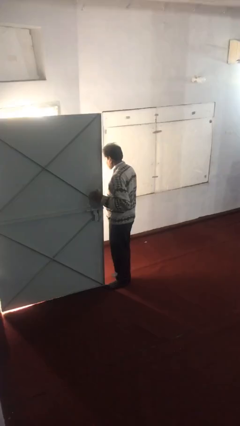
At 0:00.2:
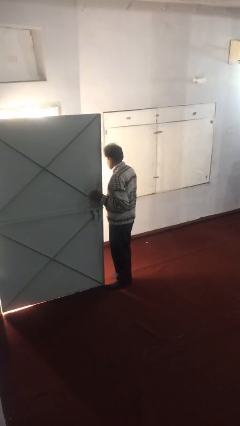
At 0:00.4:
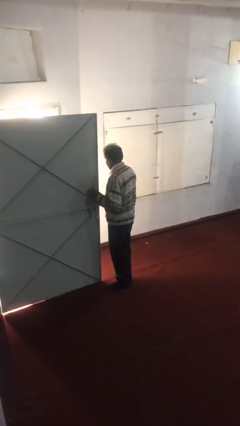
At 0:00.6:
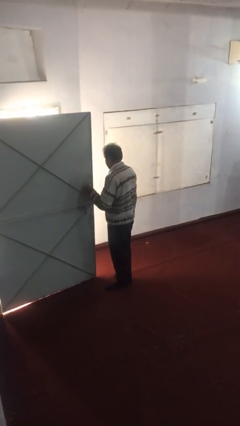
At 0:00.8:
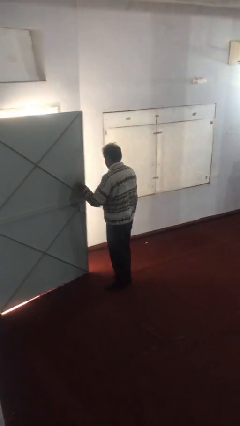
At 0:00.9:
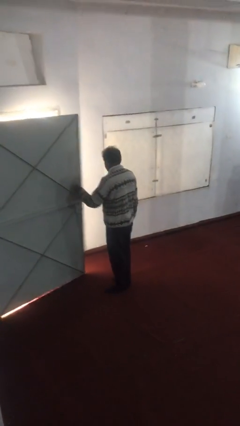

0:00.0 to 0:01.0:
person closes facility door

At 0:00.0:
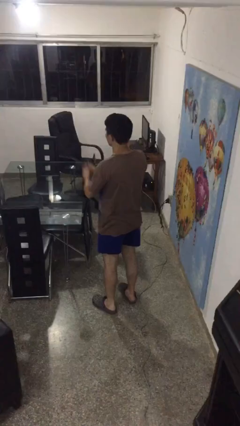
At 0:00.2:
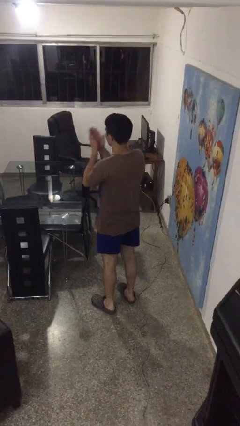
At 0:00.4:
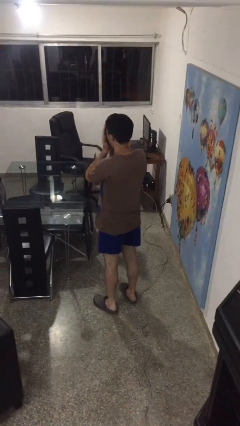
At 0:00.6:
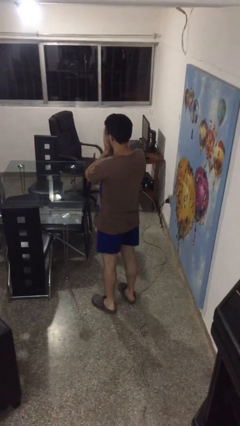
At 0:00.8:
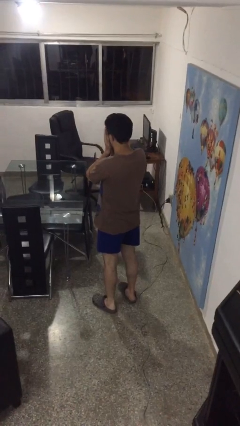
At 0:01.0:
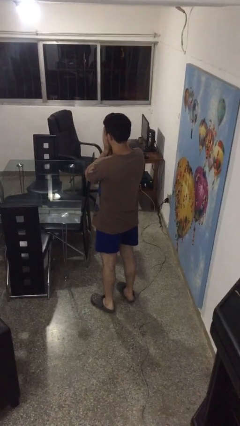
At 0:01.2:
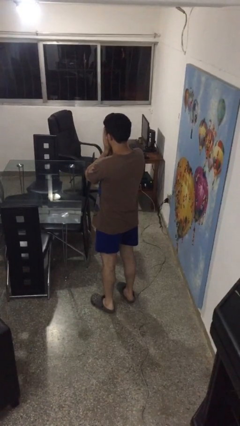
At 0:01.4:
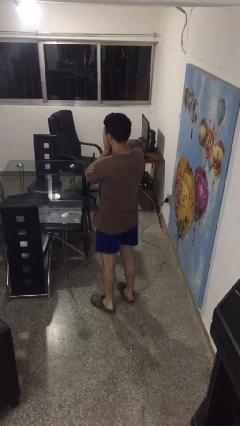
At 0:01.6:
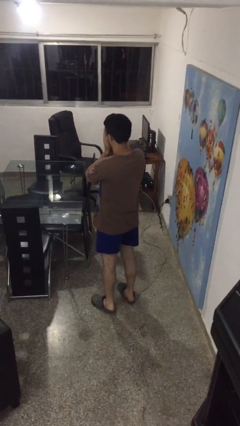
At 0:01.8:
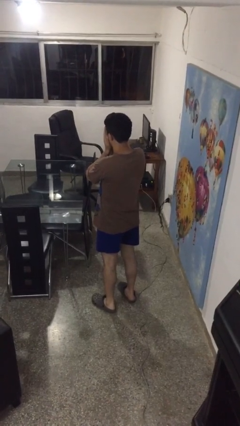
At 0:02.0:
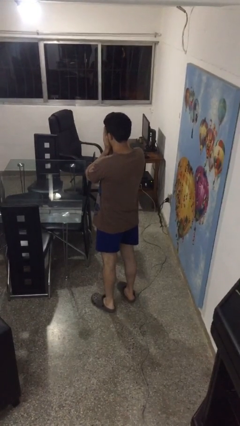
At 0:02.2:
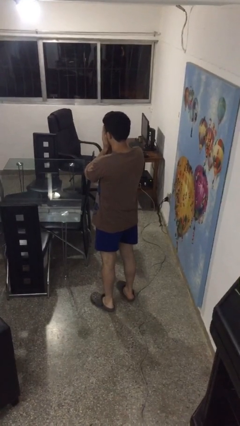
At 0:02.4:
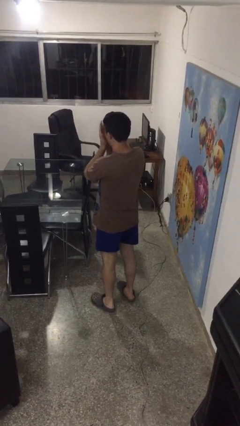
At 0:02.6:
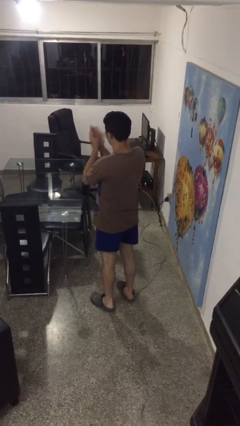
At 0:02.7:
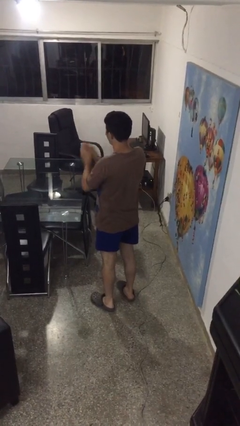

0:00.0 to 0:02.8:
person covers face with hands

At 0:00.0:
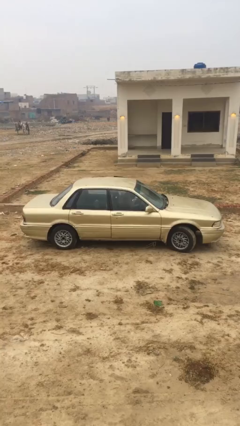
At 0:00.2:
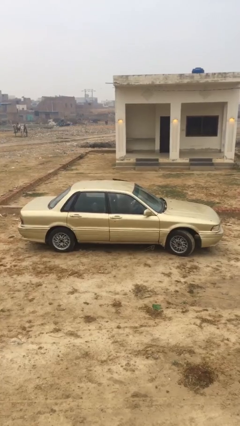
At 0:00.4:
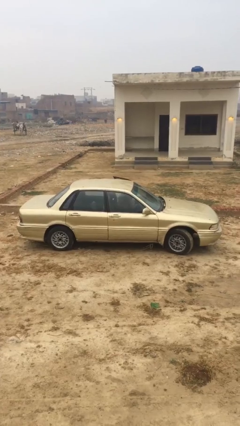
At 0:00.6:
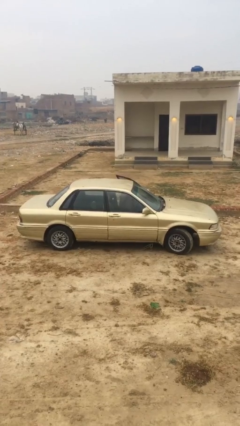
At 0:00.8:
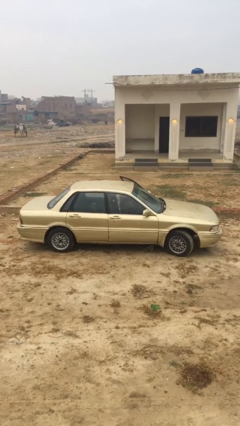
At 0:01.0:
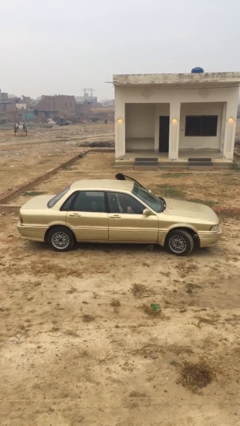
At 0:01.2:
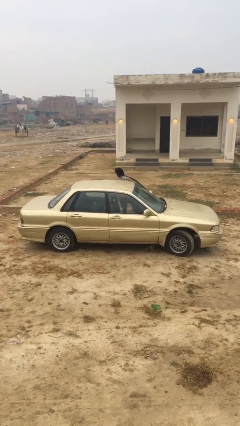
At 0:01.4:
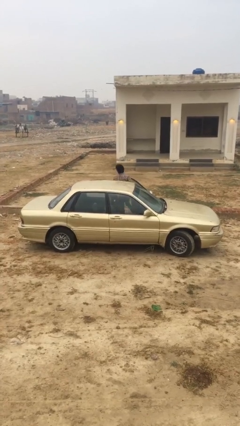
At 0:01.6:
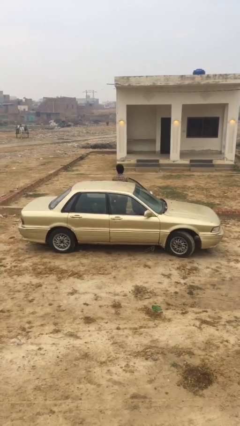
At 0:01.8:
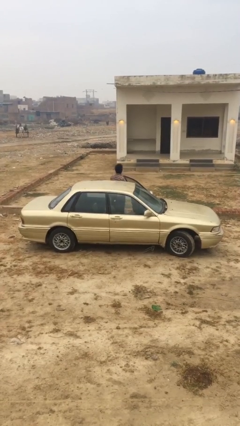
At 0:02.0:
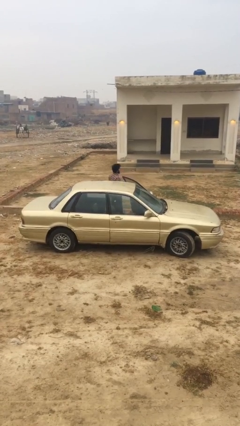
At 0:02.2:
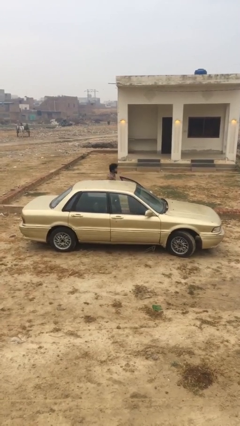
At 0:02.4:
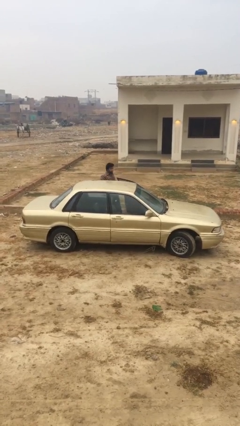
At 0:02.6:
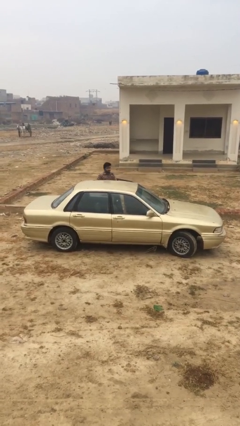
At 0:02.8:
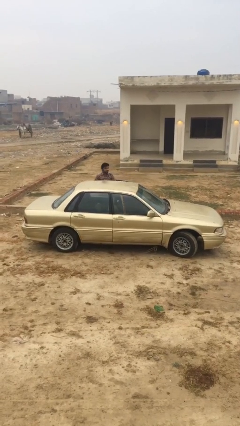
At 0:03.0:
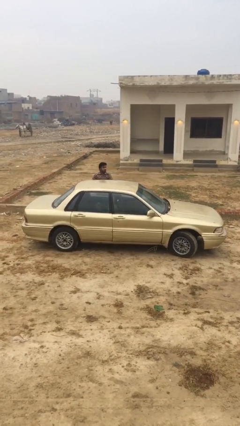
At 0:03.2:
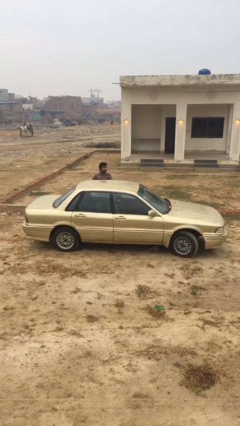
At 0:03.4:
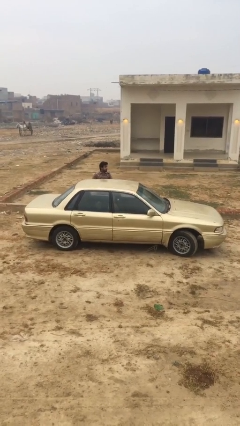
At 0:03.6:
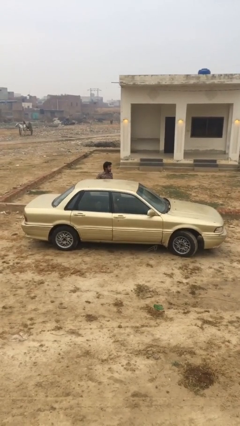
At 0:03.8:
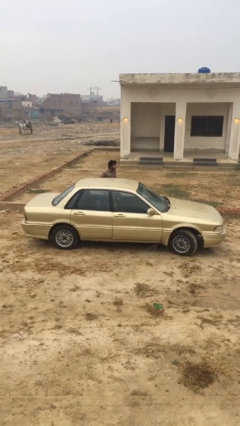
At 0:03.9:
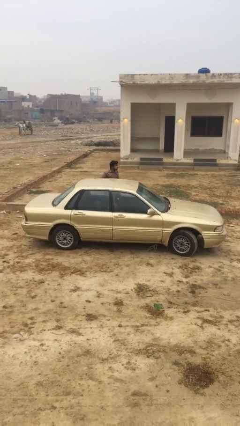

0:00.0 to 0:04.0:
car drops off person

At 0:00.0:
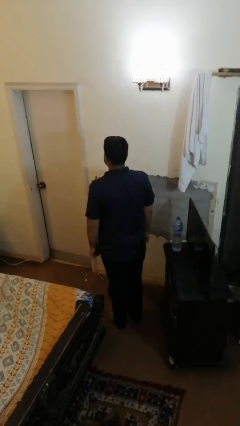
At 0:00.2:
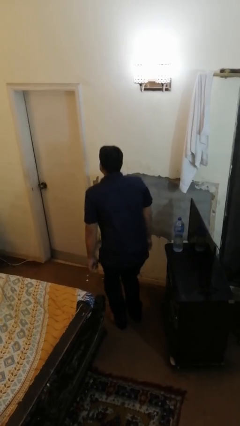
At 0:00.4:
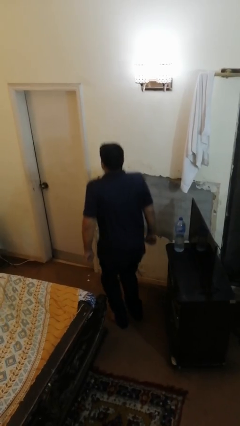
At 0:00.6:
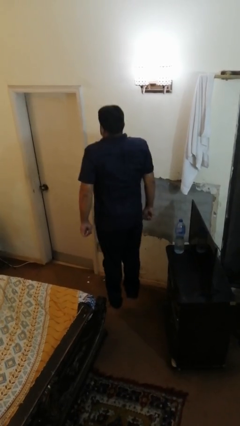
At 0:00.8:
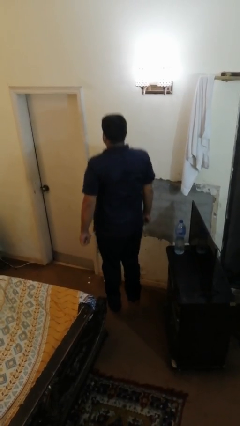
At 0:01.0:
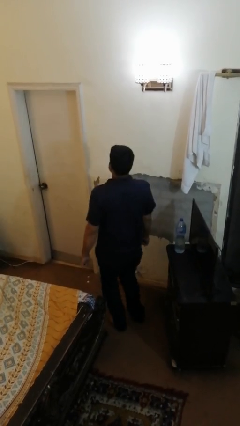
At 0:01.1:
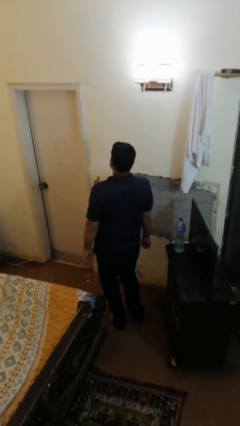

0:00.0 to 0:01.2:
person jumps

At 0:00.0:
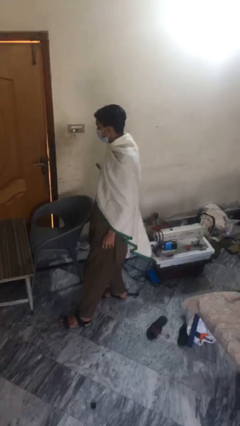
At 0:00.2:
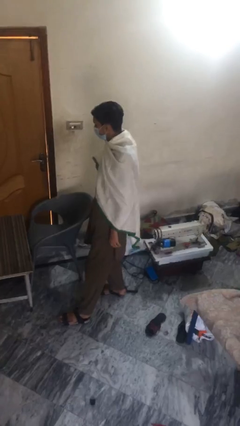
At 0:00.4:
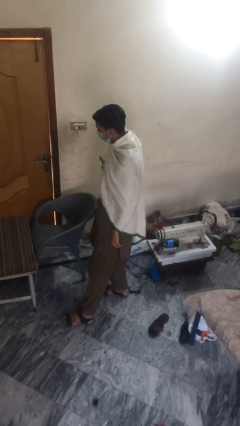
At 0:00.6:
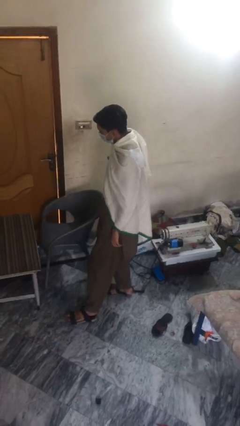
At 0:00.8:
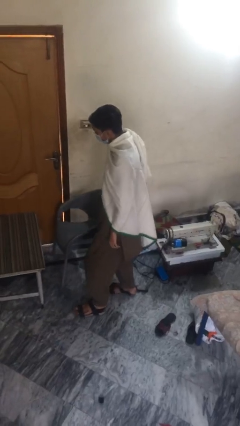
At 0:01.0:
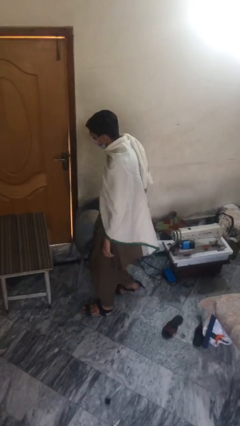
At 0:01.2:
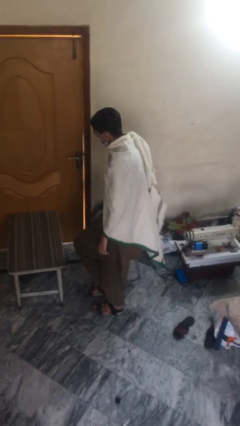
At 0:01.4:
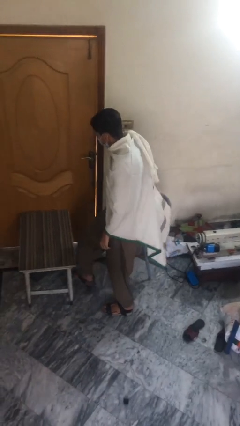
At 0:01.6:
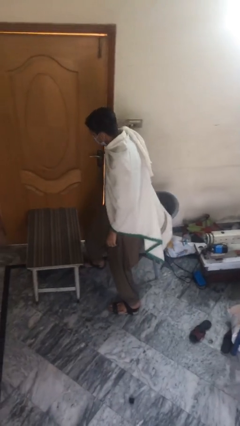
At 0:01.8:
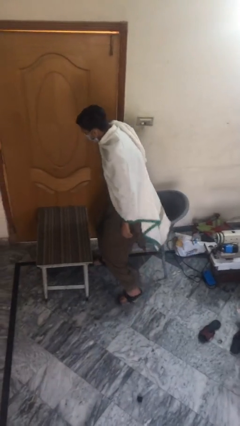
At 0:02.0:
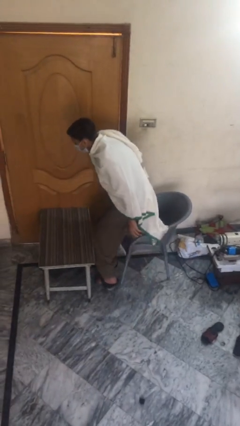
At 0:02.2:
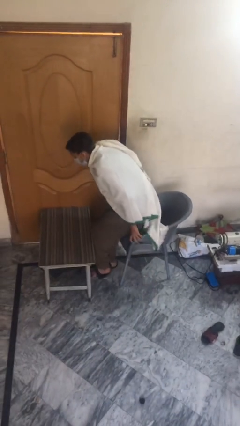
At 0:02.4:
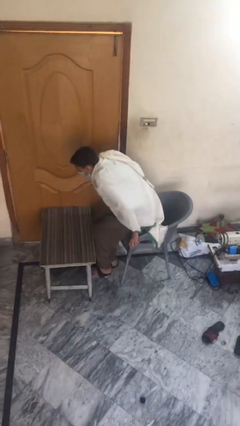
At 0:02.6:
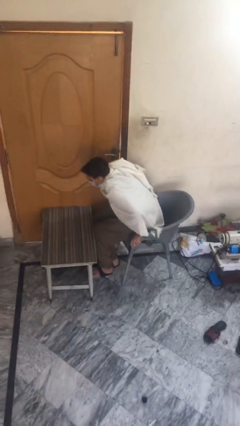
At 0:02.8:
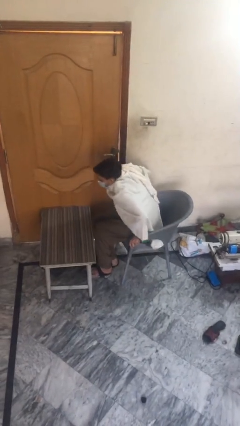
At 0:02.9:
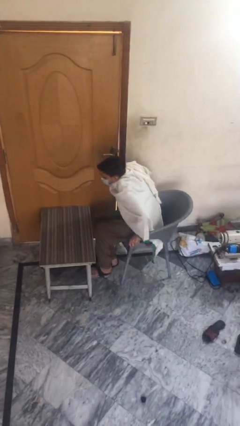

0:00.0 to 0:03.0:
person sits down

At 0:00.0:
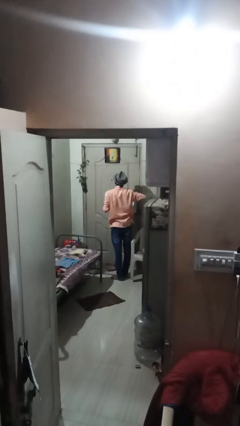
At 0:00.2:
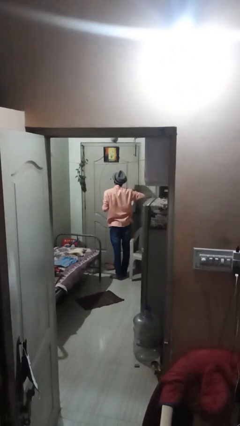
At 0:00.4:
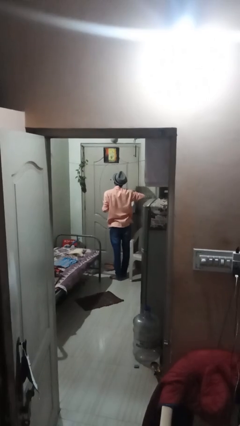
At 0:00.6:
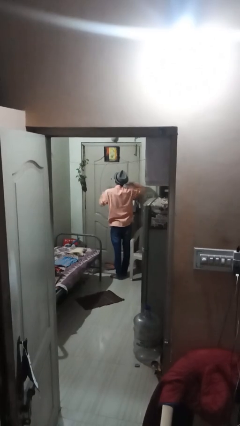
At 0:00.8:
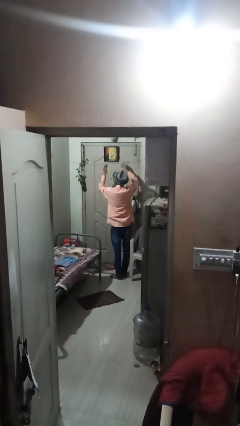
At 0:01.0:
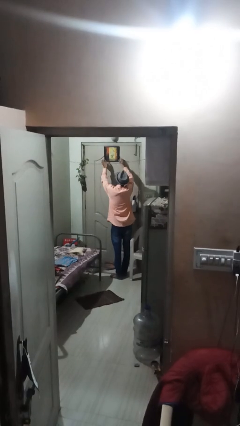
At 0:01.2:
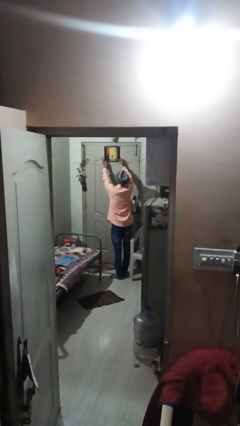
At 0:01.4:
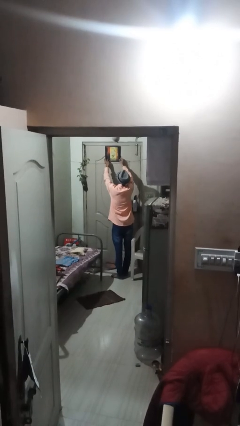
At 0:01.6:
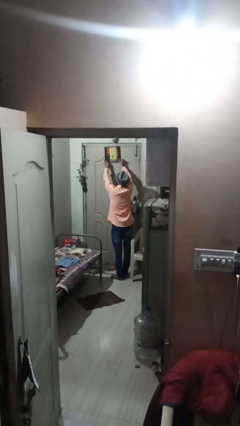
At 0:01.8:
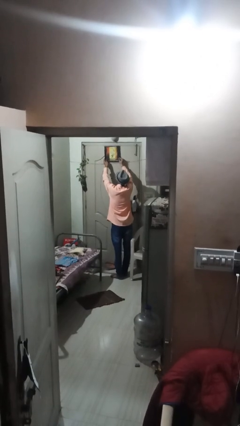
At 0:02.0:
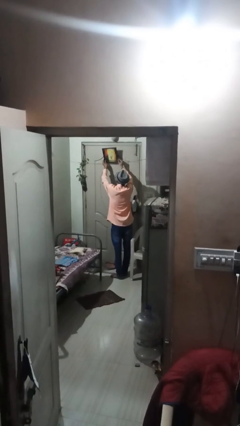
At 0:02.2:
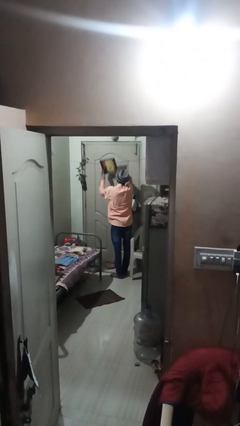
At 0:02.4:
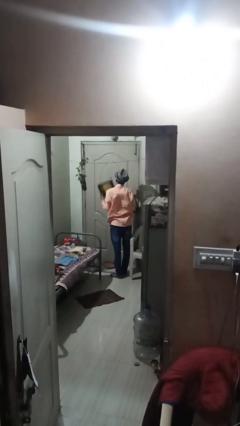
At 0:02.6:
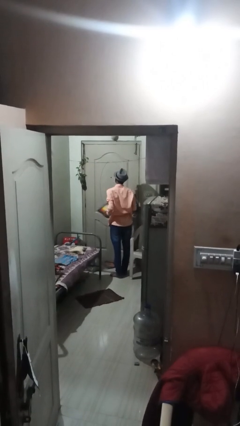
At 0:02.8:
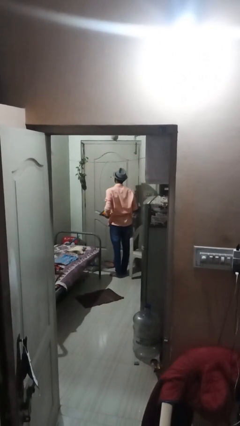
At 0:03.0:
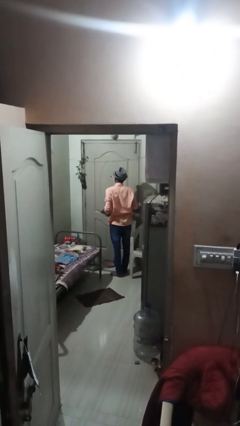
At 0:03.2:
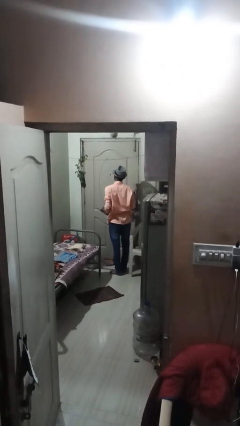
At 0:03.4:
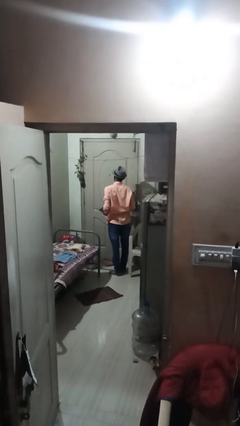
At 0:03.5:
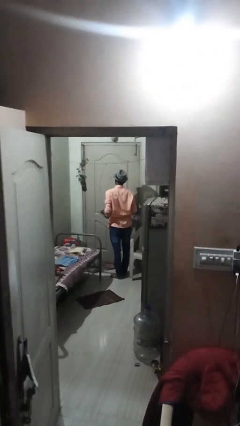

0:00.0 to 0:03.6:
person takes down picture frame

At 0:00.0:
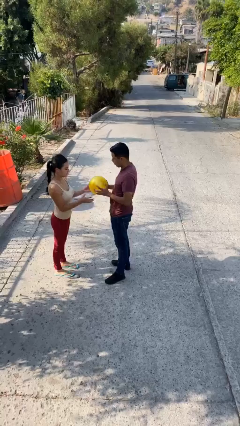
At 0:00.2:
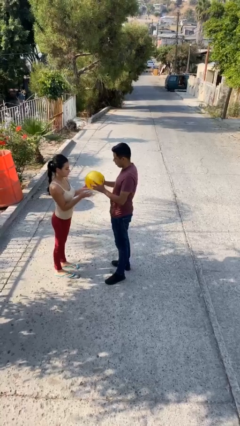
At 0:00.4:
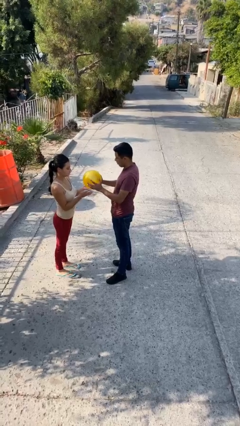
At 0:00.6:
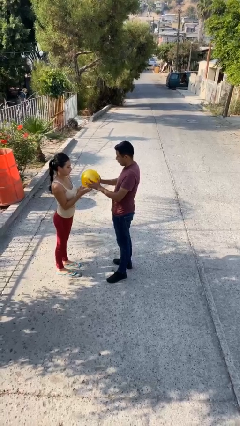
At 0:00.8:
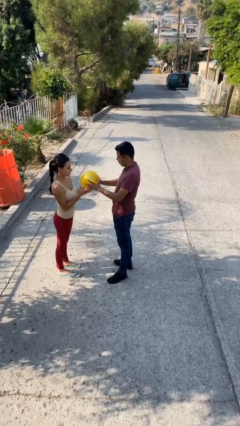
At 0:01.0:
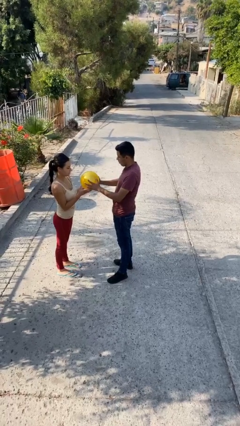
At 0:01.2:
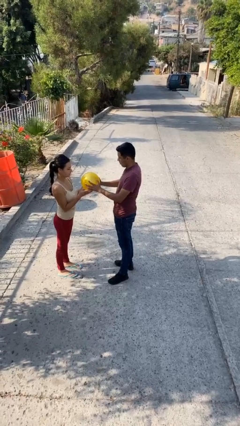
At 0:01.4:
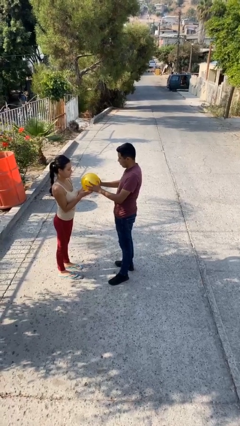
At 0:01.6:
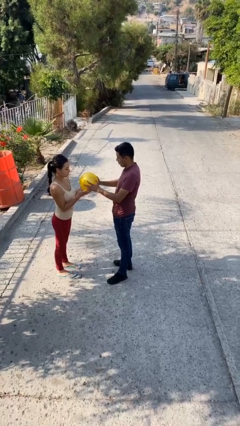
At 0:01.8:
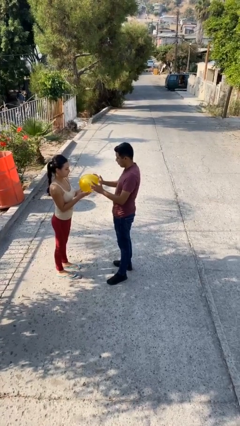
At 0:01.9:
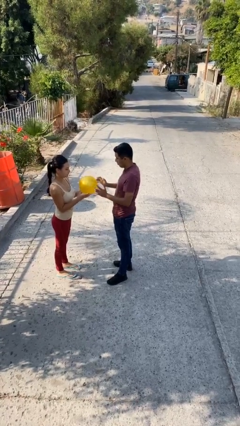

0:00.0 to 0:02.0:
person transfers object to person
